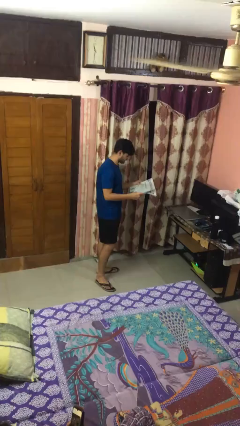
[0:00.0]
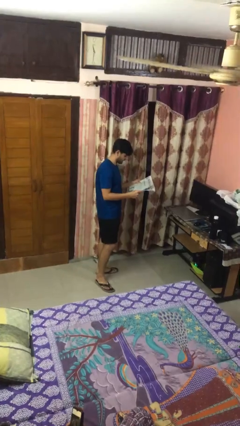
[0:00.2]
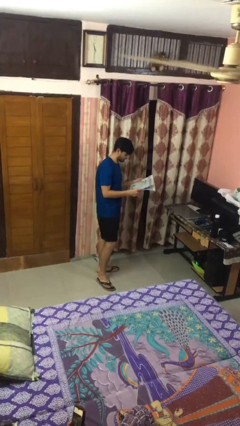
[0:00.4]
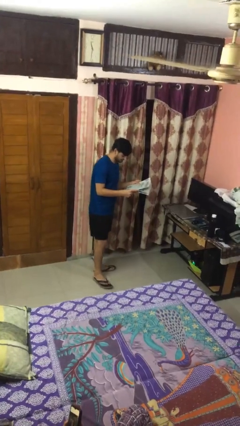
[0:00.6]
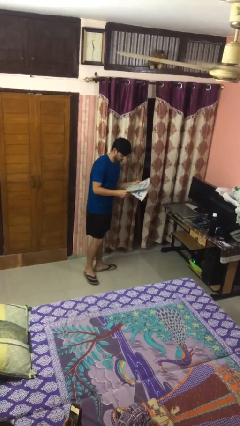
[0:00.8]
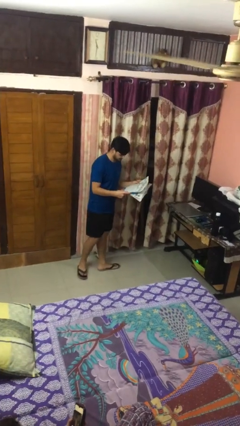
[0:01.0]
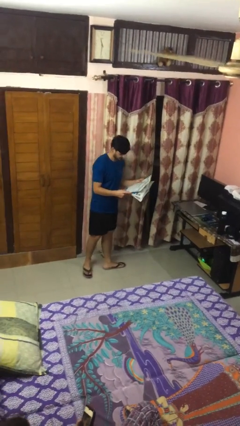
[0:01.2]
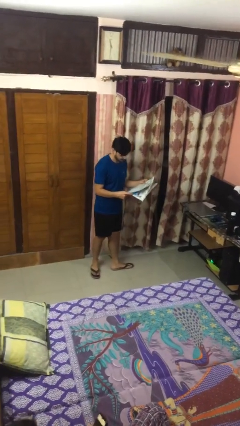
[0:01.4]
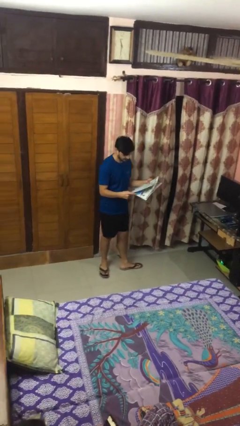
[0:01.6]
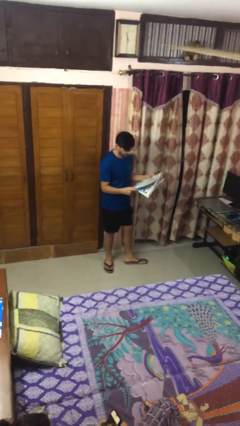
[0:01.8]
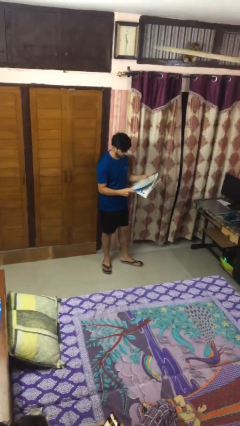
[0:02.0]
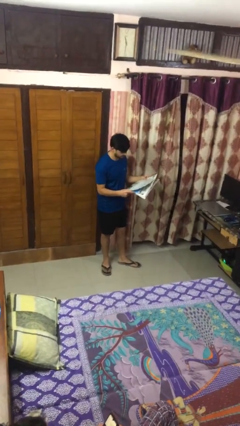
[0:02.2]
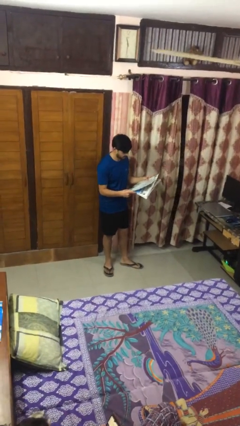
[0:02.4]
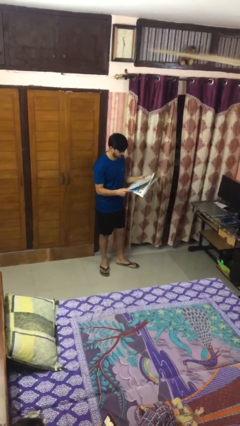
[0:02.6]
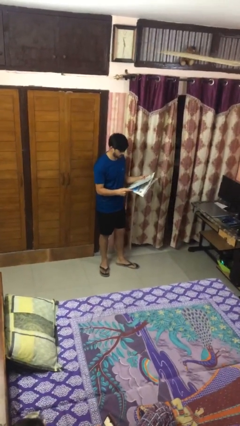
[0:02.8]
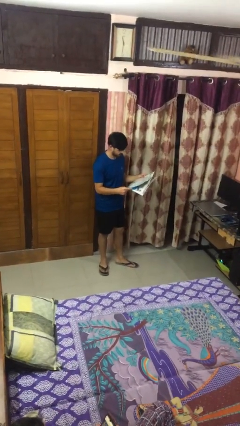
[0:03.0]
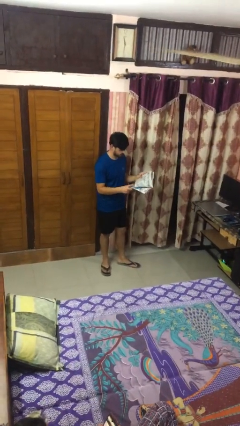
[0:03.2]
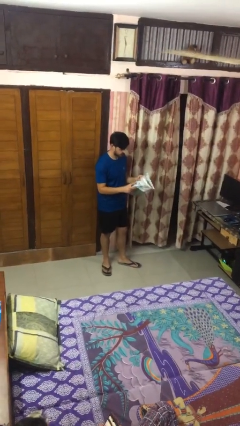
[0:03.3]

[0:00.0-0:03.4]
person reads newspaper

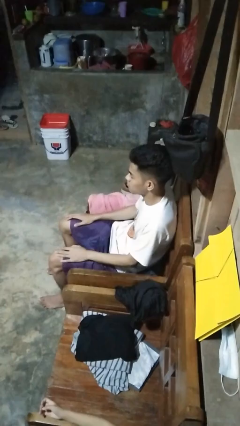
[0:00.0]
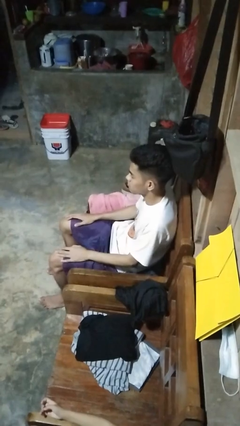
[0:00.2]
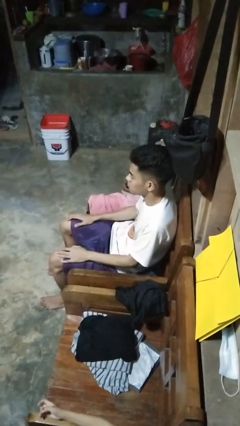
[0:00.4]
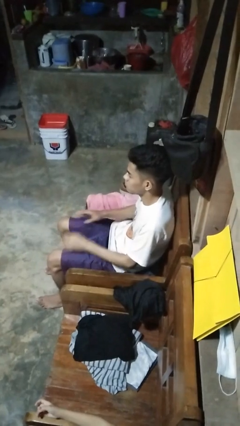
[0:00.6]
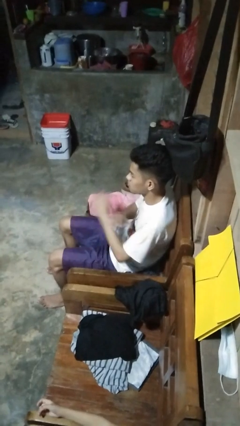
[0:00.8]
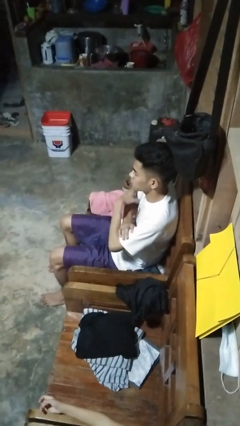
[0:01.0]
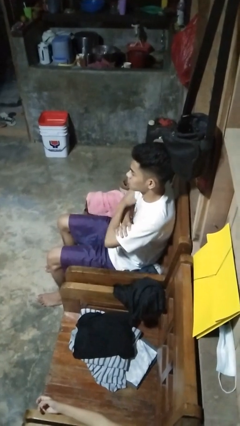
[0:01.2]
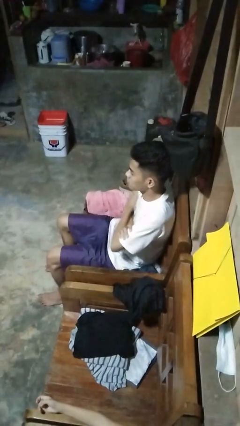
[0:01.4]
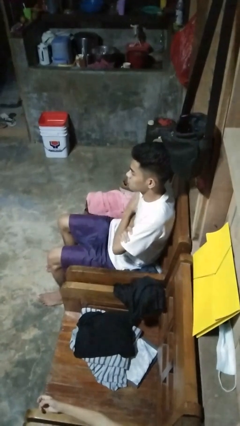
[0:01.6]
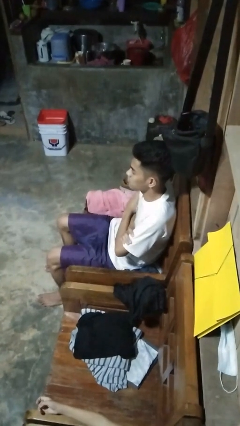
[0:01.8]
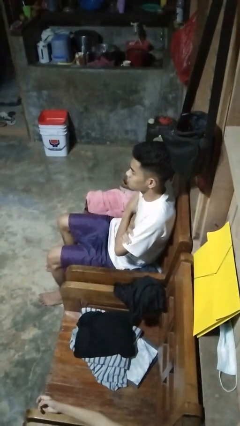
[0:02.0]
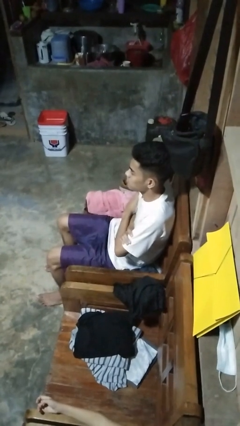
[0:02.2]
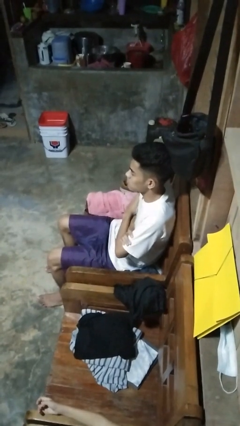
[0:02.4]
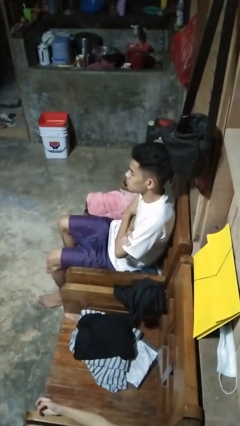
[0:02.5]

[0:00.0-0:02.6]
person crosses arms

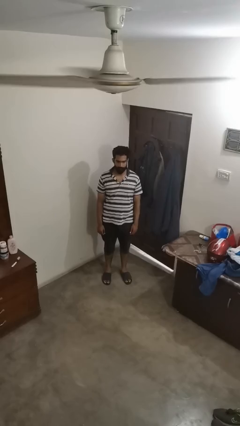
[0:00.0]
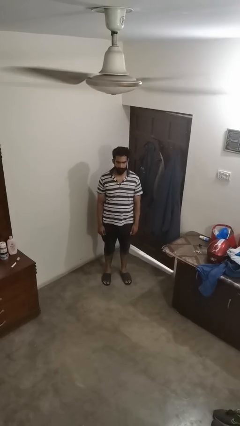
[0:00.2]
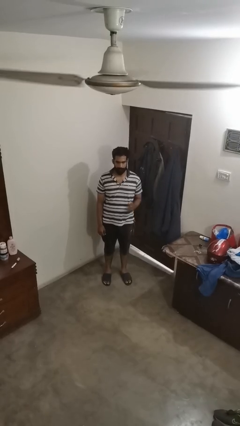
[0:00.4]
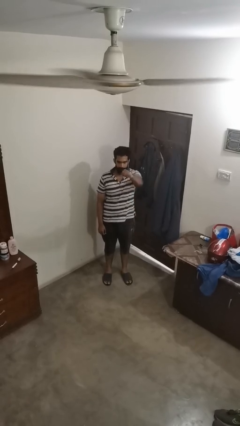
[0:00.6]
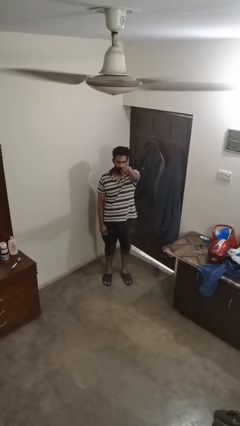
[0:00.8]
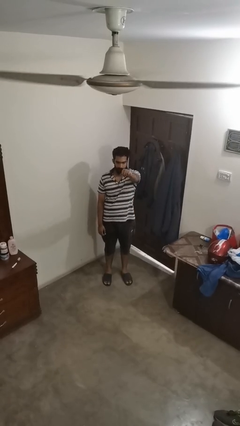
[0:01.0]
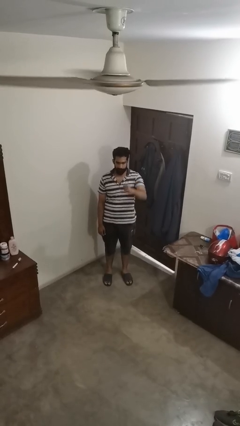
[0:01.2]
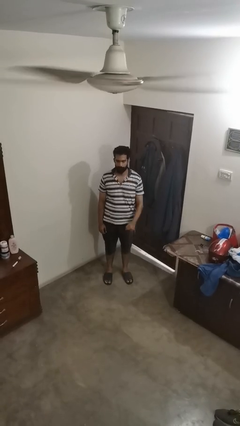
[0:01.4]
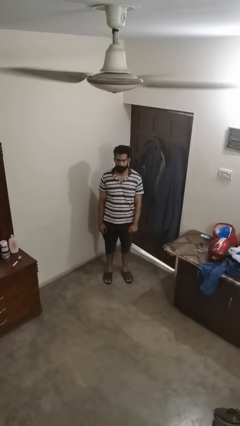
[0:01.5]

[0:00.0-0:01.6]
person punches

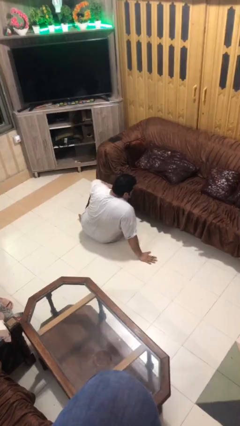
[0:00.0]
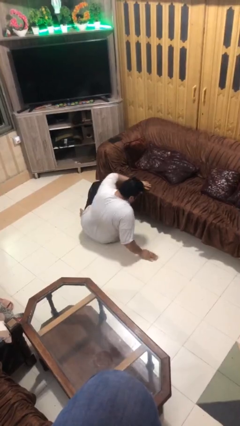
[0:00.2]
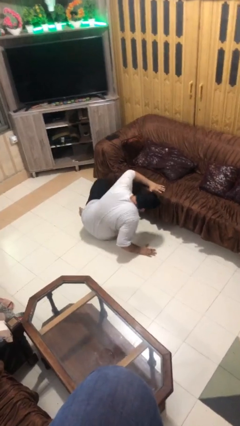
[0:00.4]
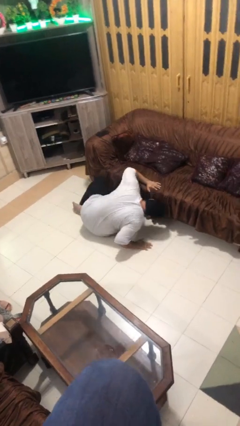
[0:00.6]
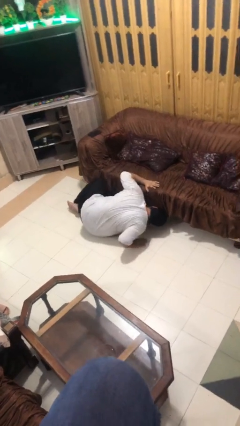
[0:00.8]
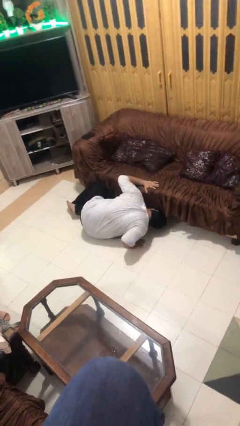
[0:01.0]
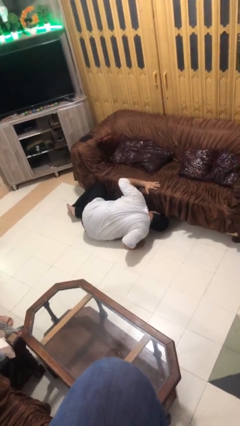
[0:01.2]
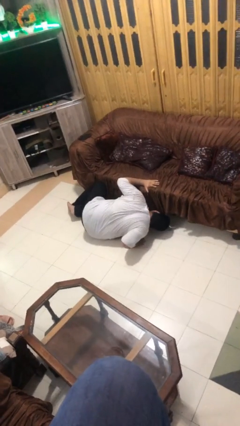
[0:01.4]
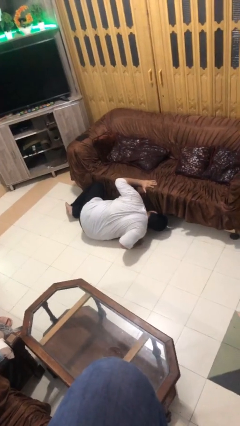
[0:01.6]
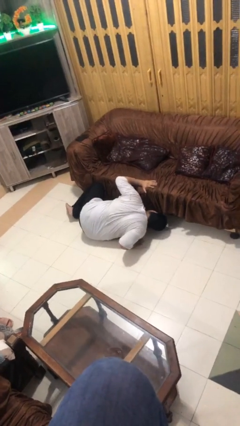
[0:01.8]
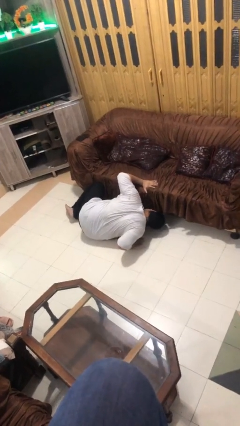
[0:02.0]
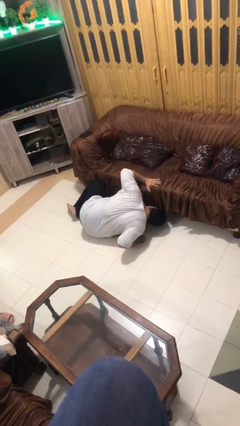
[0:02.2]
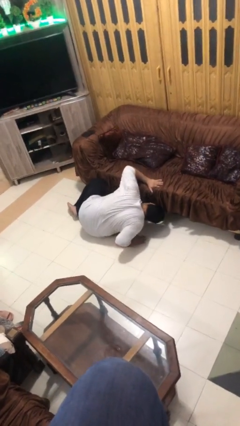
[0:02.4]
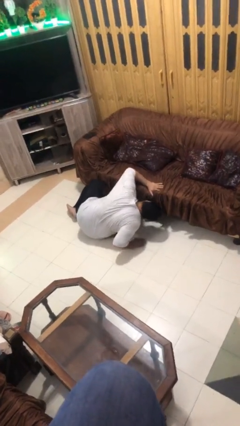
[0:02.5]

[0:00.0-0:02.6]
person searches under couch

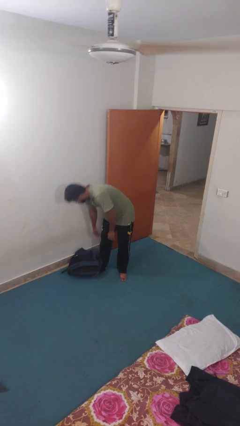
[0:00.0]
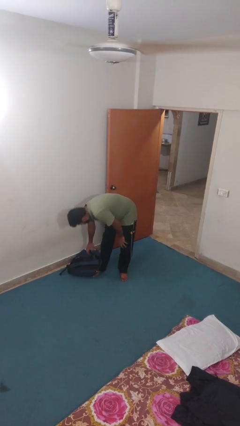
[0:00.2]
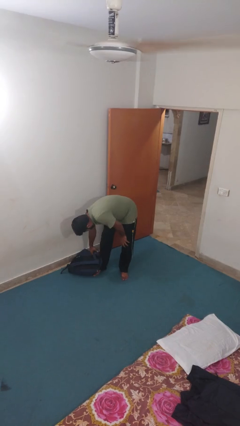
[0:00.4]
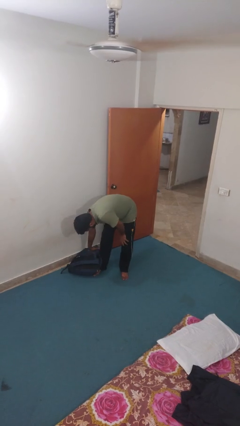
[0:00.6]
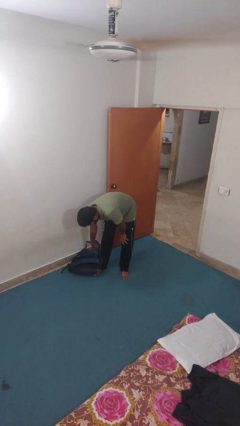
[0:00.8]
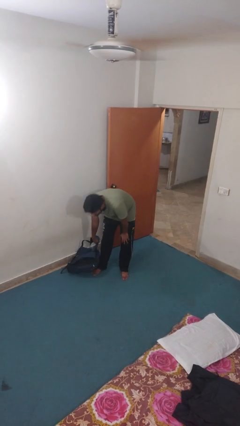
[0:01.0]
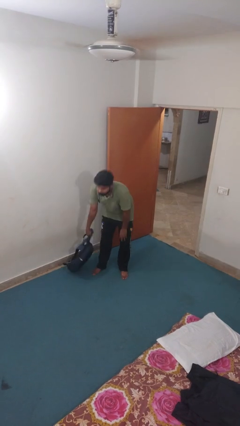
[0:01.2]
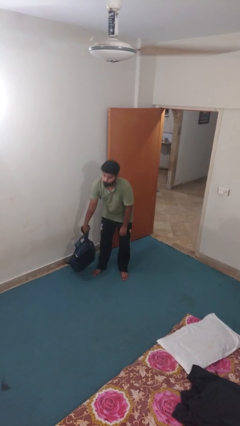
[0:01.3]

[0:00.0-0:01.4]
person picks up object from floor

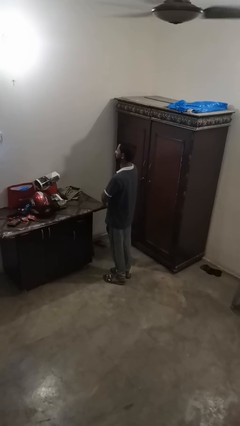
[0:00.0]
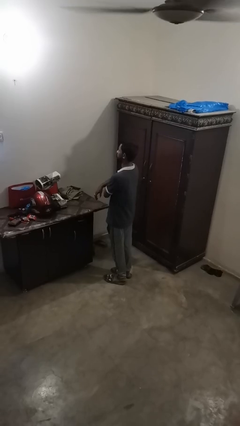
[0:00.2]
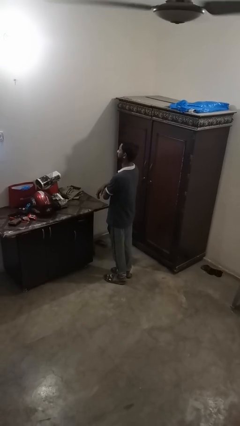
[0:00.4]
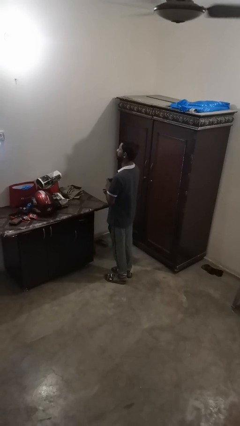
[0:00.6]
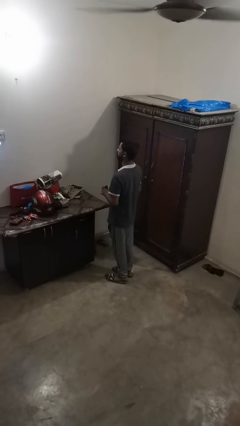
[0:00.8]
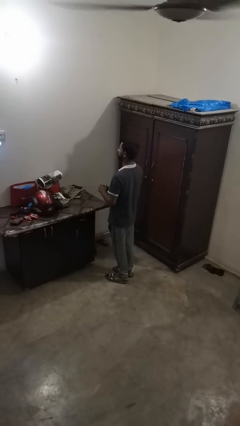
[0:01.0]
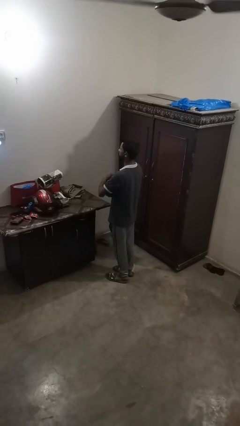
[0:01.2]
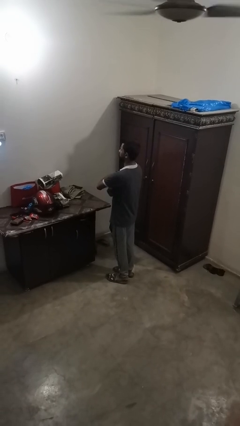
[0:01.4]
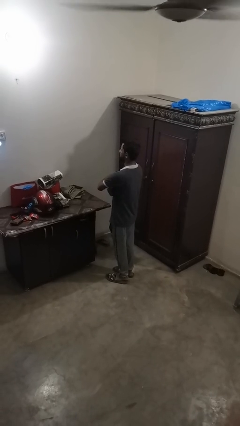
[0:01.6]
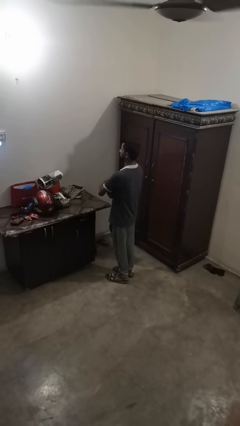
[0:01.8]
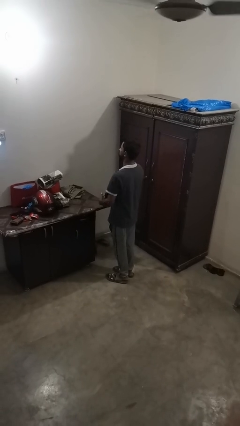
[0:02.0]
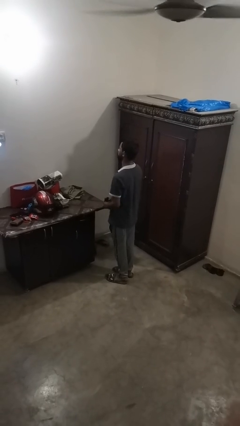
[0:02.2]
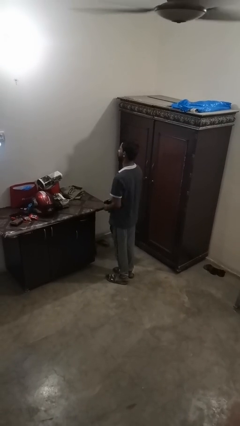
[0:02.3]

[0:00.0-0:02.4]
person applies deodorant

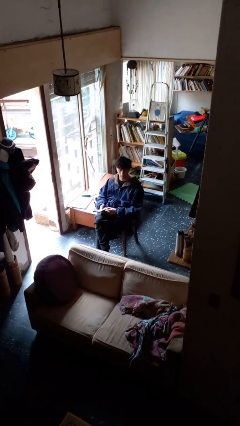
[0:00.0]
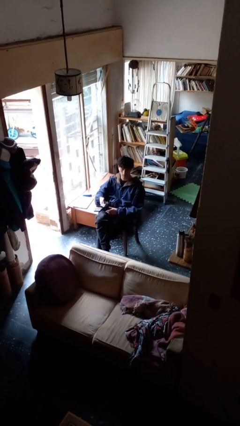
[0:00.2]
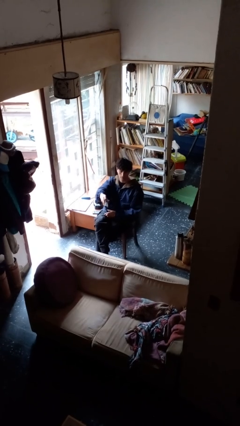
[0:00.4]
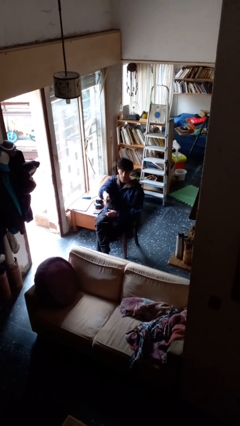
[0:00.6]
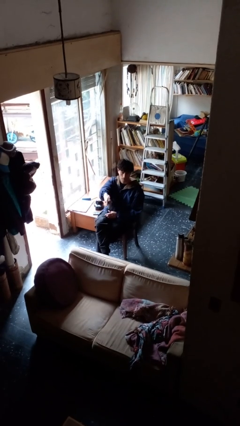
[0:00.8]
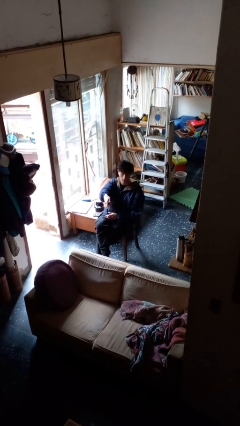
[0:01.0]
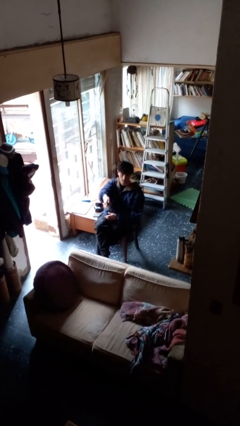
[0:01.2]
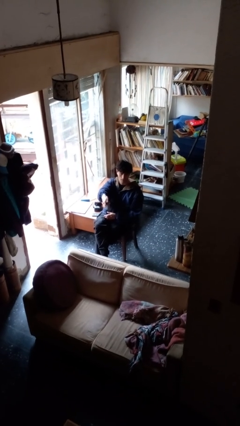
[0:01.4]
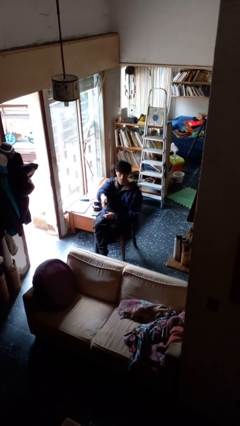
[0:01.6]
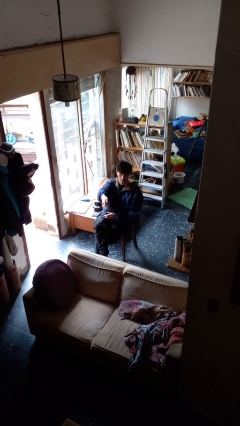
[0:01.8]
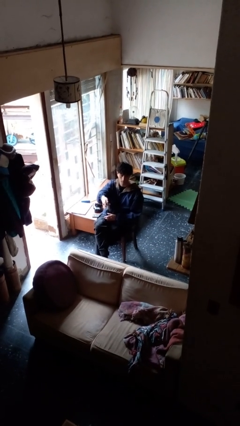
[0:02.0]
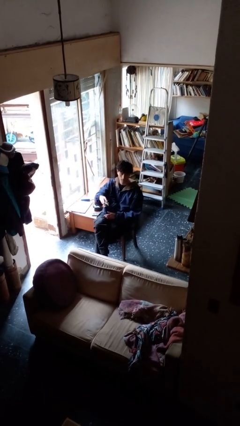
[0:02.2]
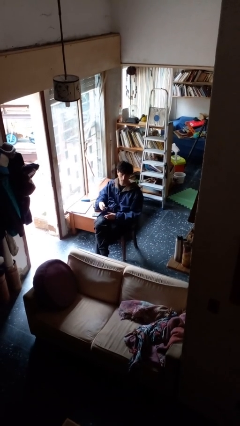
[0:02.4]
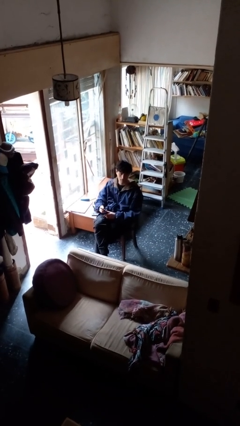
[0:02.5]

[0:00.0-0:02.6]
person uses television remote

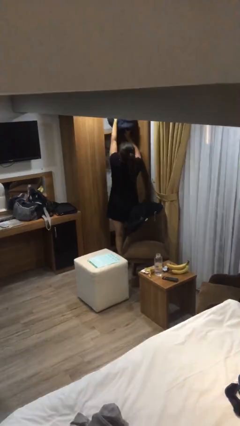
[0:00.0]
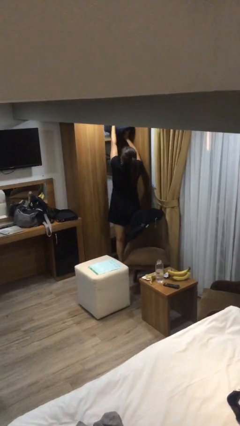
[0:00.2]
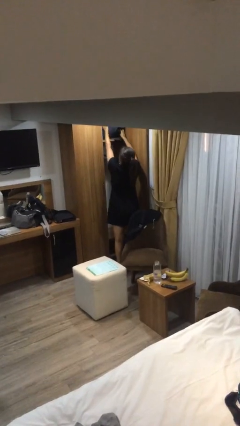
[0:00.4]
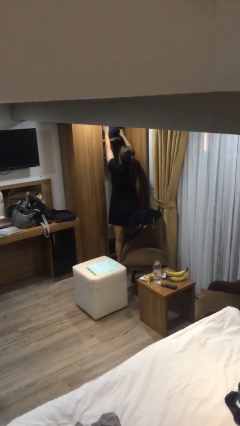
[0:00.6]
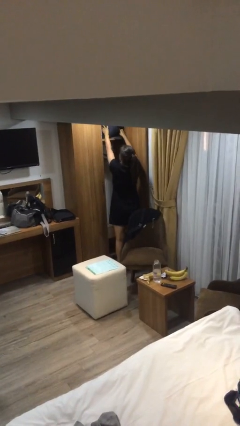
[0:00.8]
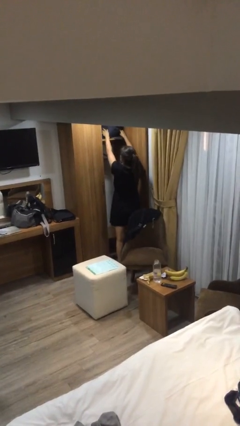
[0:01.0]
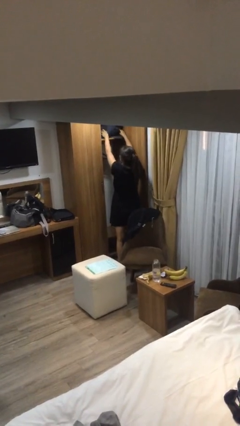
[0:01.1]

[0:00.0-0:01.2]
person puts down object on shelf
